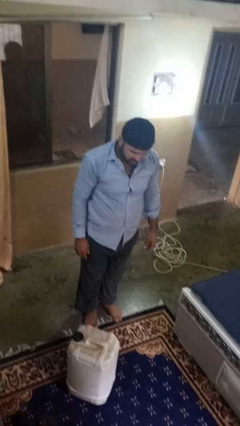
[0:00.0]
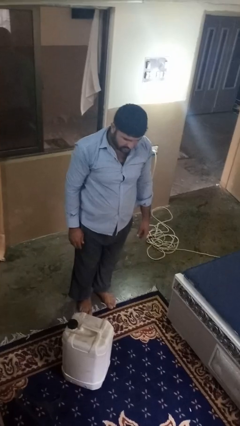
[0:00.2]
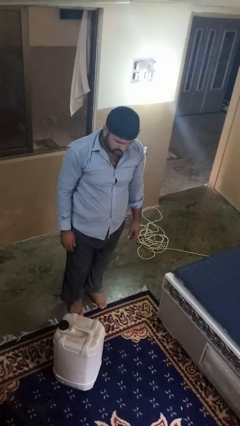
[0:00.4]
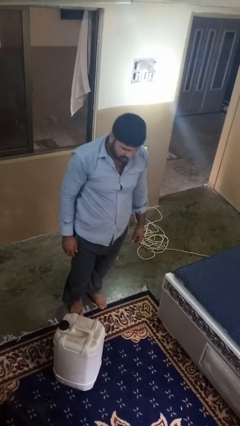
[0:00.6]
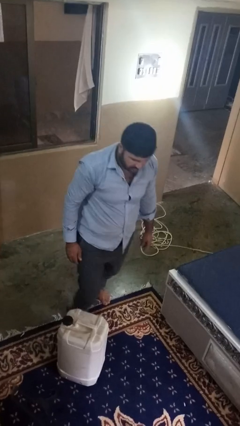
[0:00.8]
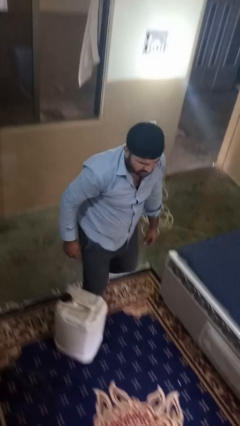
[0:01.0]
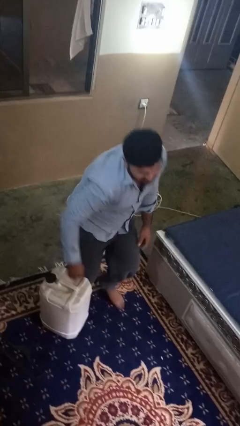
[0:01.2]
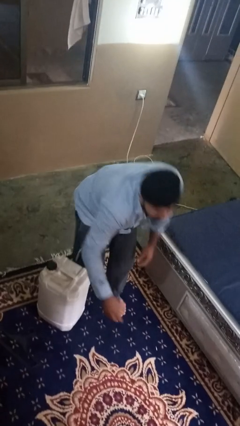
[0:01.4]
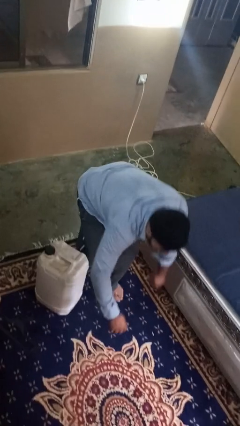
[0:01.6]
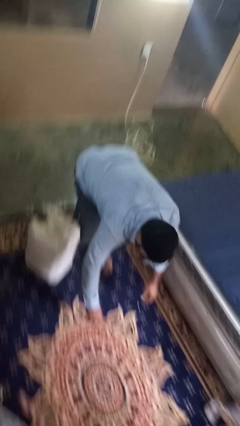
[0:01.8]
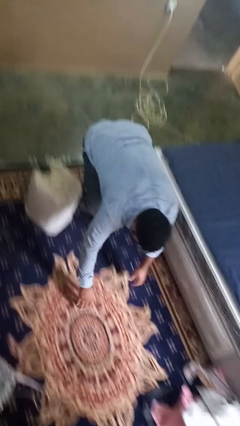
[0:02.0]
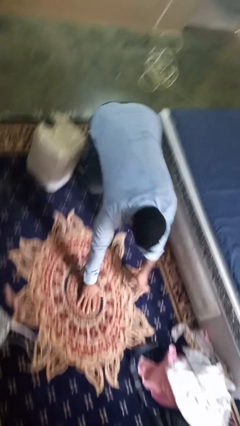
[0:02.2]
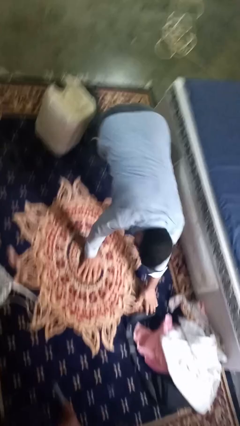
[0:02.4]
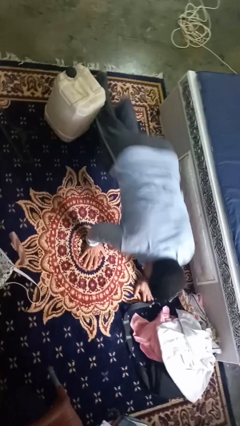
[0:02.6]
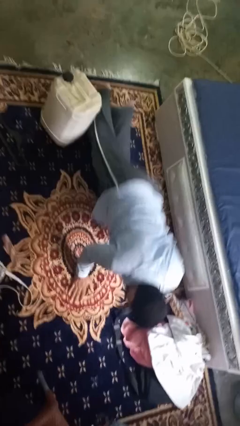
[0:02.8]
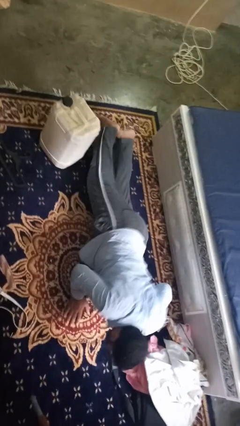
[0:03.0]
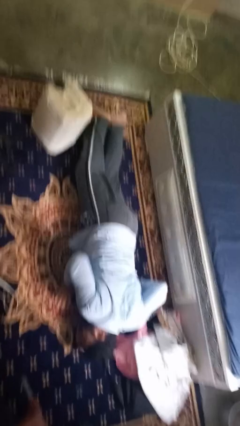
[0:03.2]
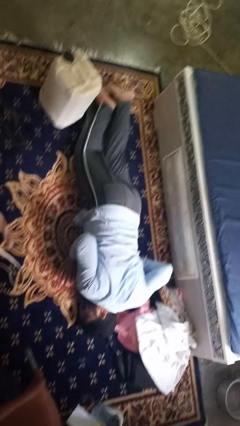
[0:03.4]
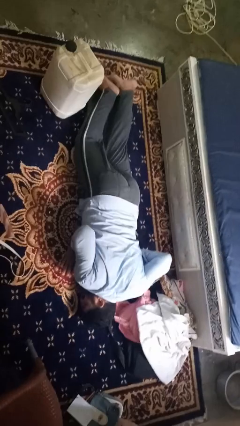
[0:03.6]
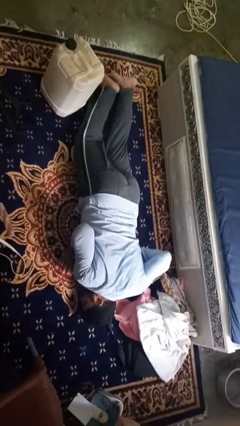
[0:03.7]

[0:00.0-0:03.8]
person trips on object on floor

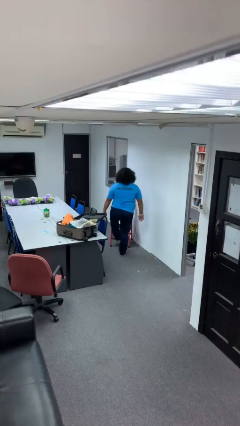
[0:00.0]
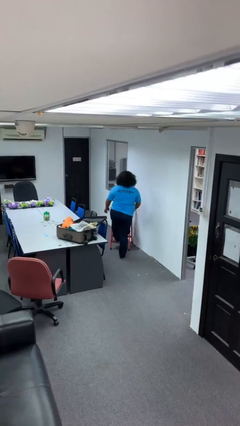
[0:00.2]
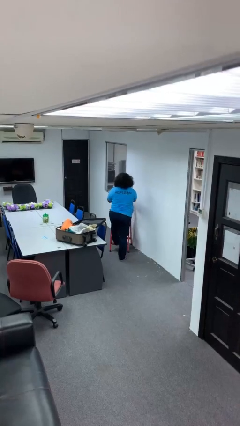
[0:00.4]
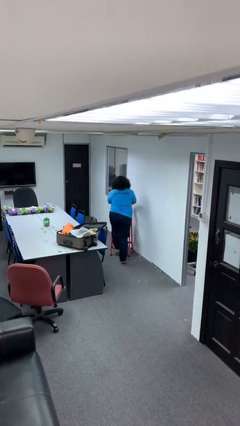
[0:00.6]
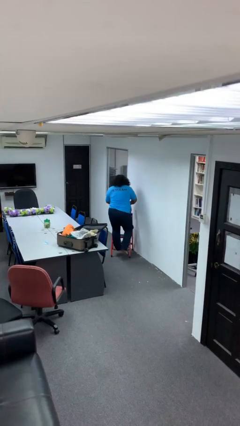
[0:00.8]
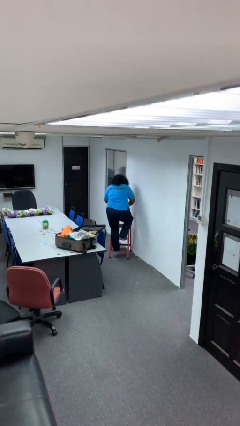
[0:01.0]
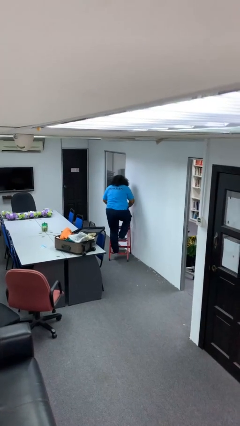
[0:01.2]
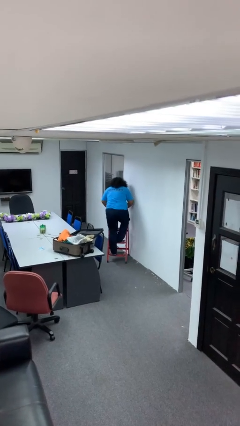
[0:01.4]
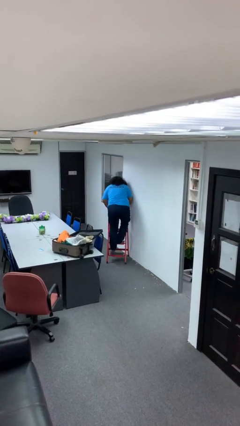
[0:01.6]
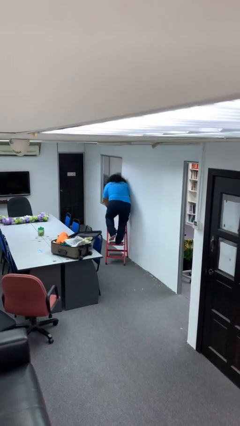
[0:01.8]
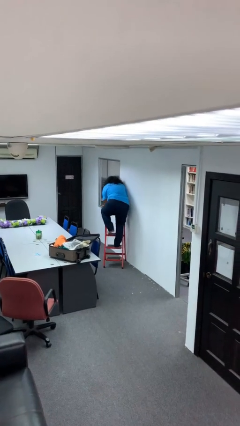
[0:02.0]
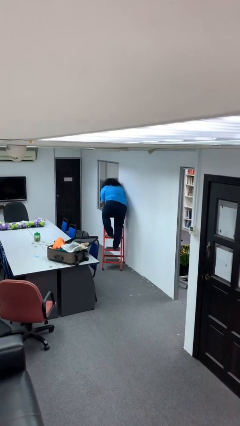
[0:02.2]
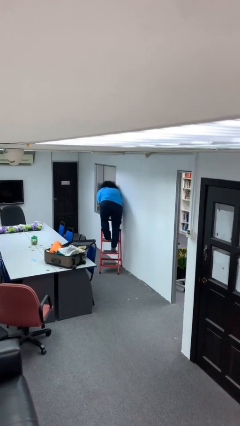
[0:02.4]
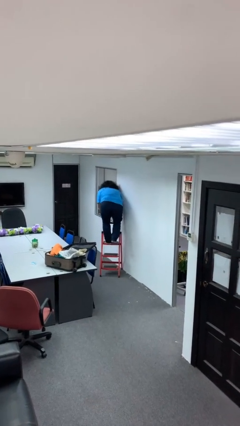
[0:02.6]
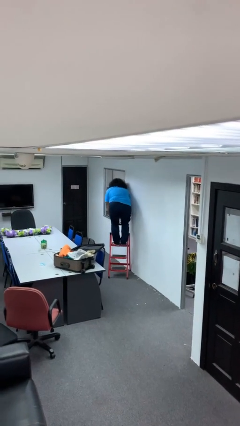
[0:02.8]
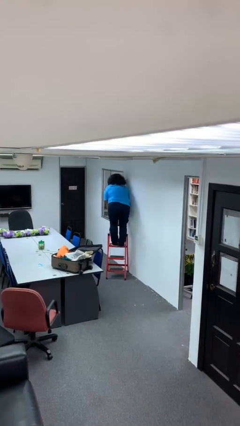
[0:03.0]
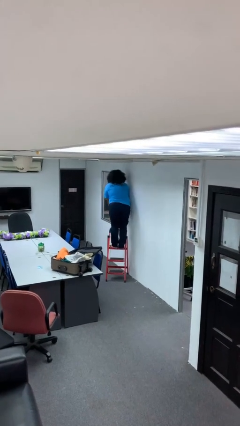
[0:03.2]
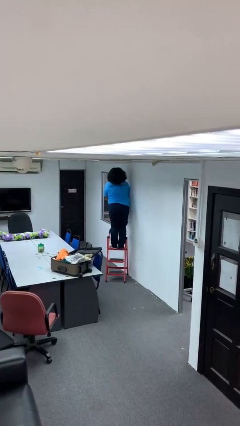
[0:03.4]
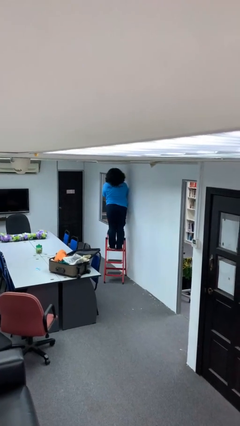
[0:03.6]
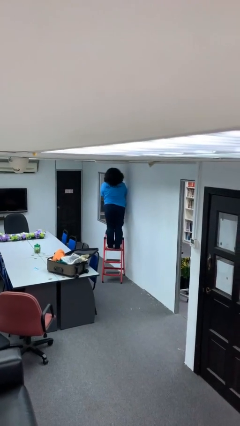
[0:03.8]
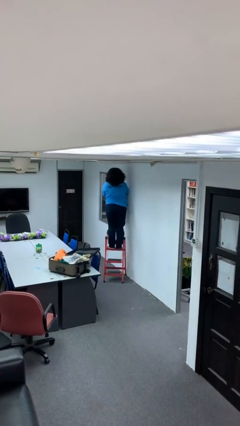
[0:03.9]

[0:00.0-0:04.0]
person climbs up ladder

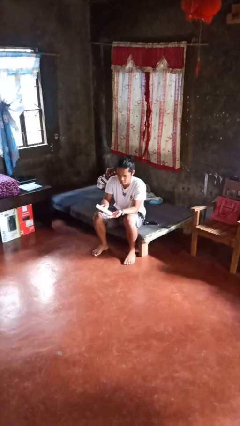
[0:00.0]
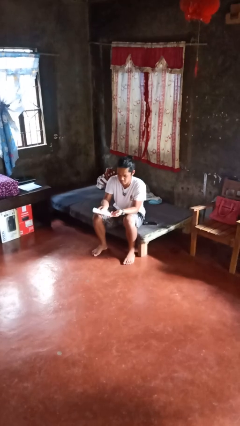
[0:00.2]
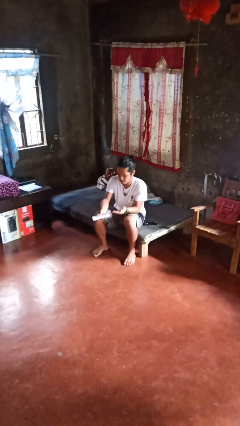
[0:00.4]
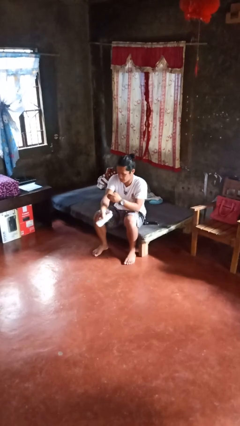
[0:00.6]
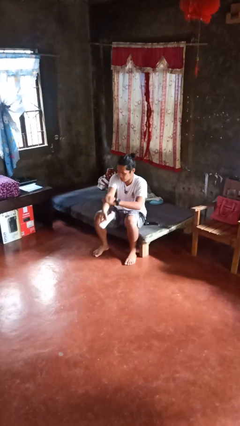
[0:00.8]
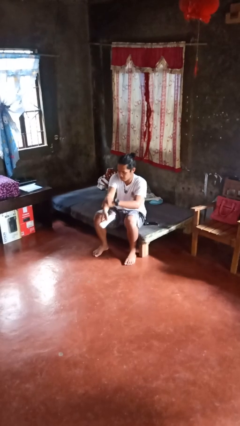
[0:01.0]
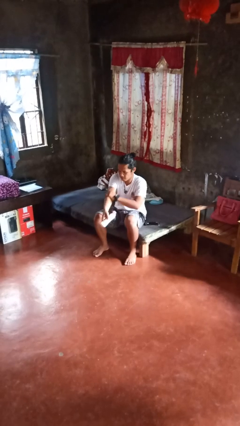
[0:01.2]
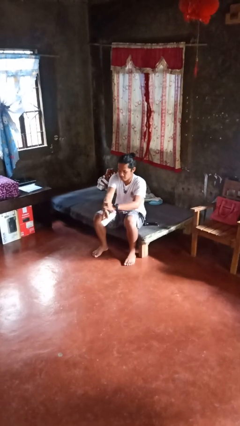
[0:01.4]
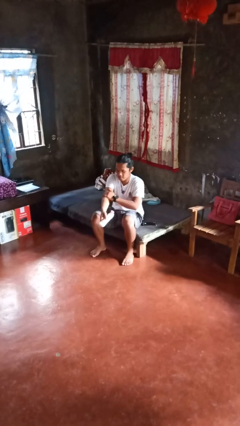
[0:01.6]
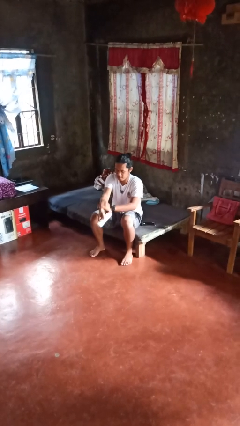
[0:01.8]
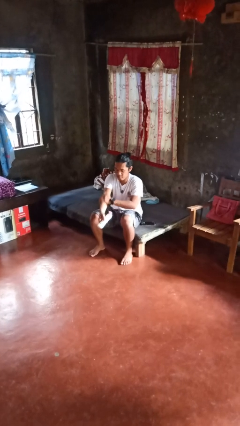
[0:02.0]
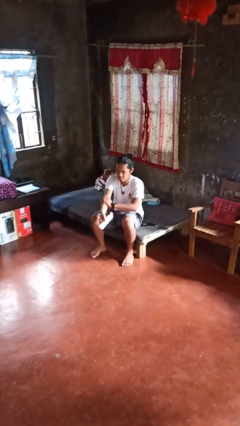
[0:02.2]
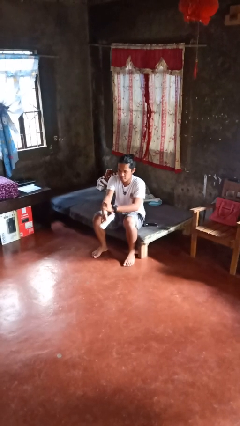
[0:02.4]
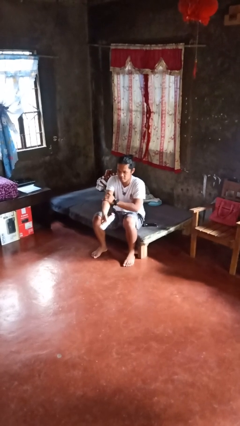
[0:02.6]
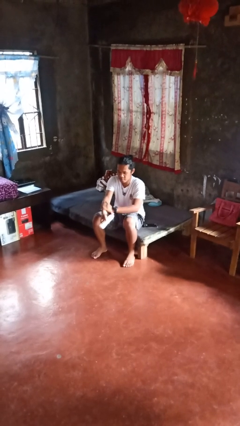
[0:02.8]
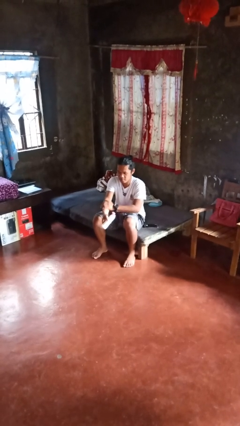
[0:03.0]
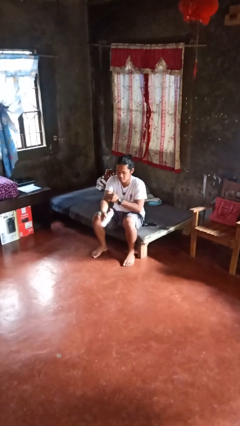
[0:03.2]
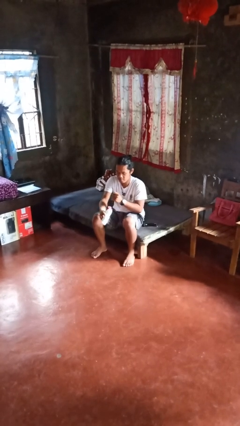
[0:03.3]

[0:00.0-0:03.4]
person applies sunscreen

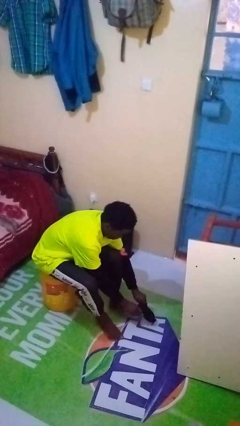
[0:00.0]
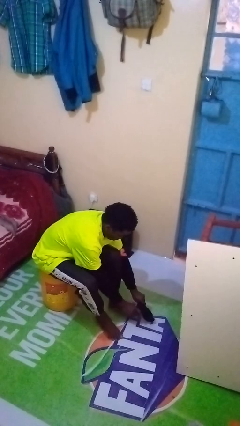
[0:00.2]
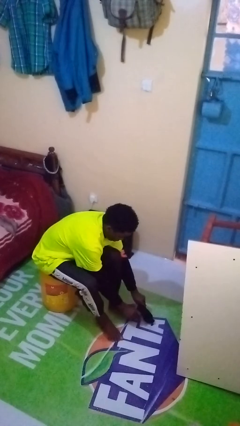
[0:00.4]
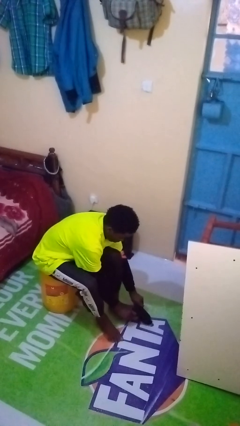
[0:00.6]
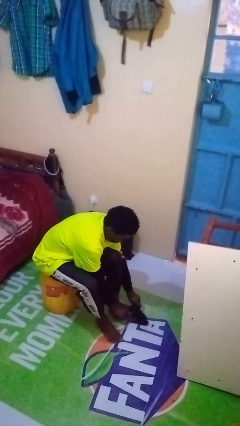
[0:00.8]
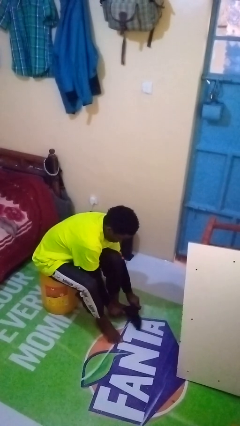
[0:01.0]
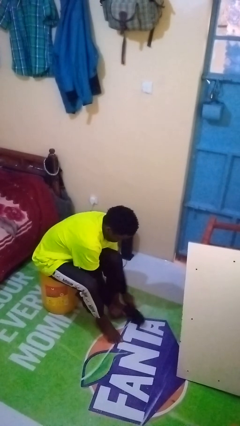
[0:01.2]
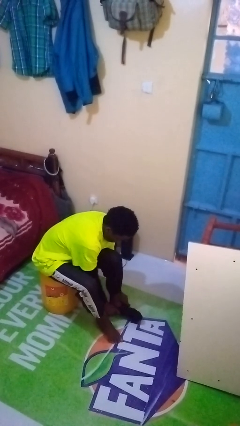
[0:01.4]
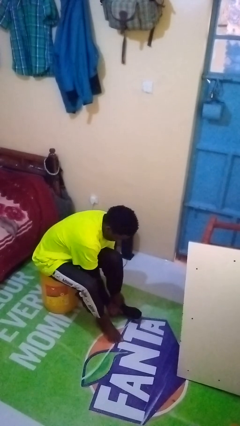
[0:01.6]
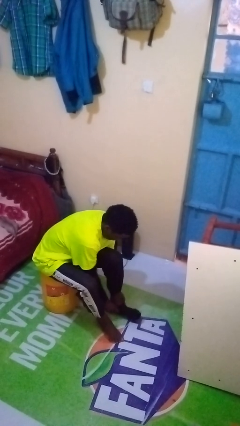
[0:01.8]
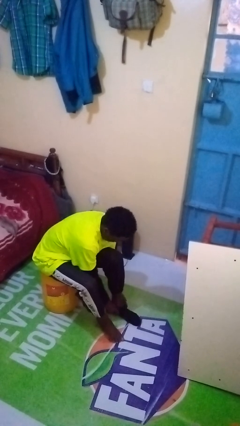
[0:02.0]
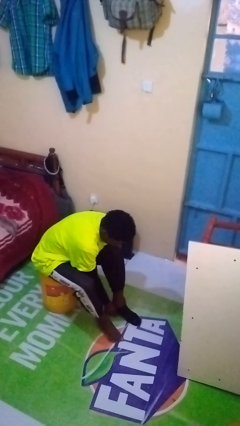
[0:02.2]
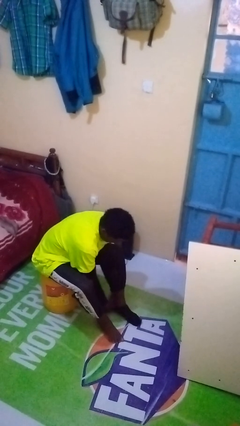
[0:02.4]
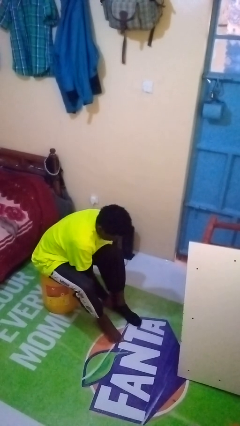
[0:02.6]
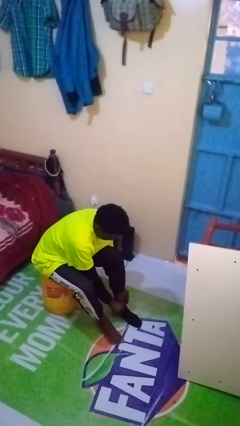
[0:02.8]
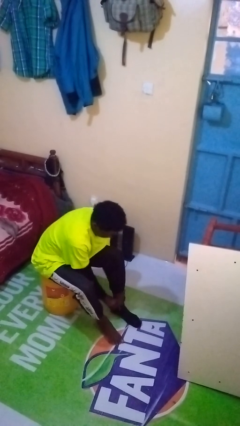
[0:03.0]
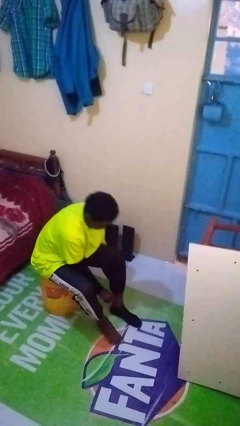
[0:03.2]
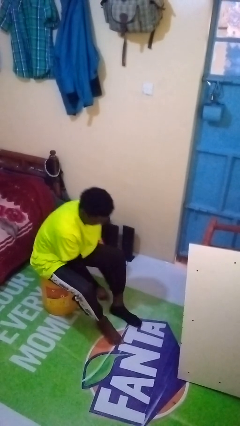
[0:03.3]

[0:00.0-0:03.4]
person puts on socks

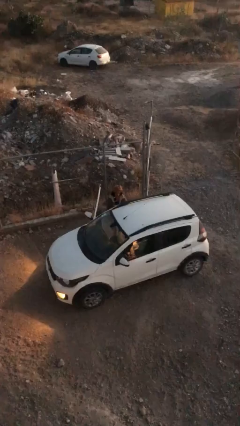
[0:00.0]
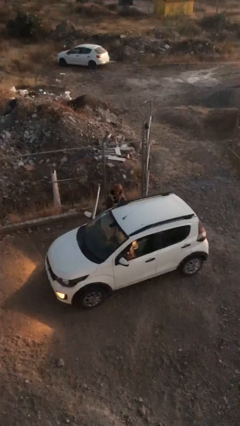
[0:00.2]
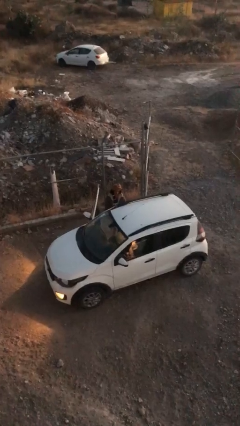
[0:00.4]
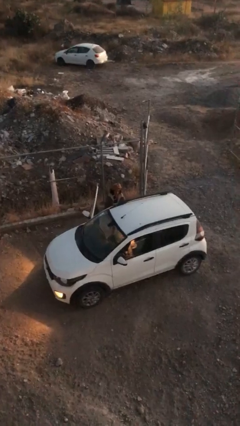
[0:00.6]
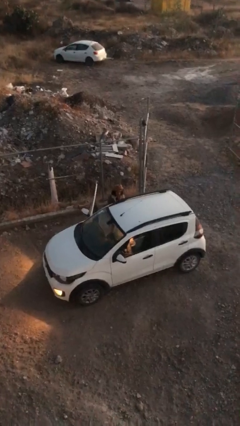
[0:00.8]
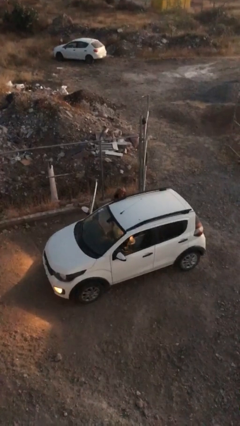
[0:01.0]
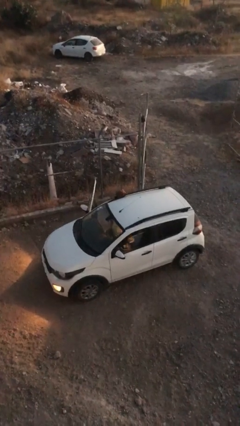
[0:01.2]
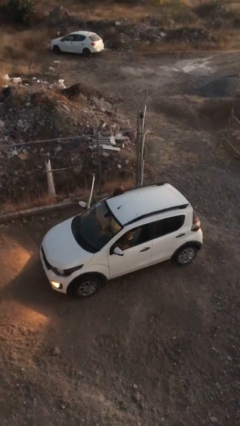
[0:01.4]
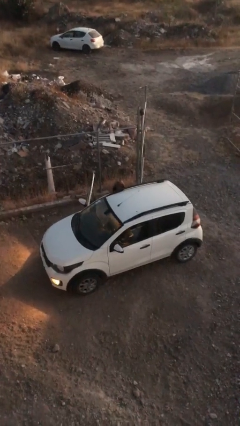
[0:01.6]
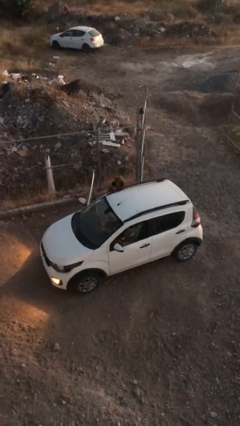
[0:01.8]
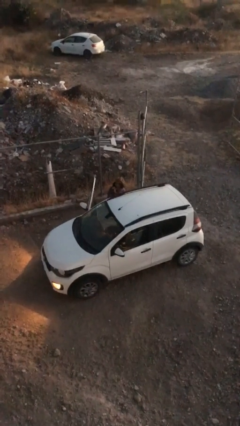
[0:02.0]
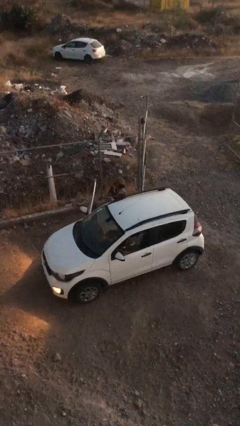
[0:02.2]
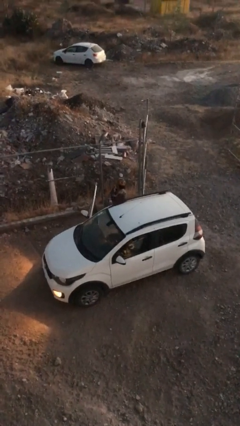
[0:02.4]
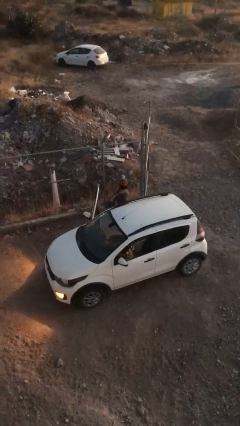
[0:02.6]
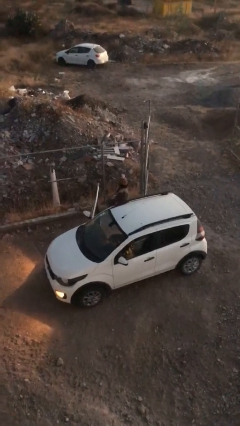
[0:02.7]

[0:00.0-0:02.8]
person unloads car
